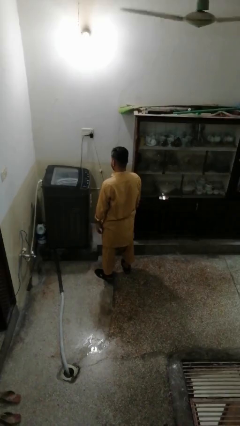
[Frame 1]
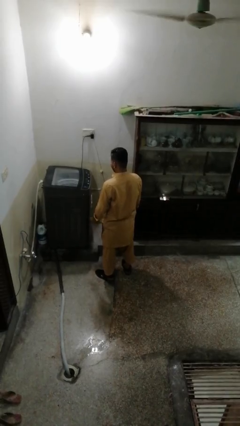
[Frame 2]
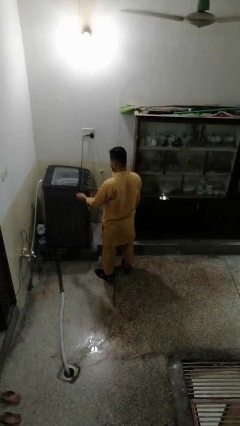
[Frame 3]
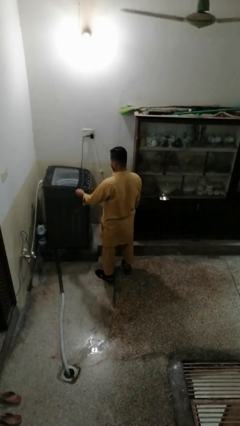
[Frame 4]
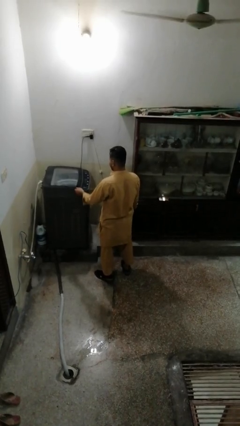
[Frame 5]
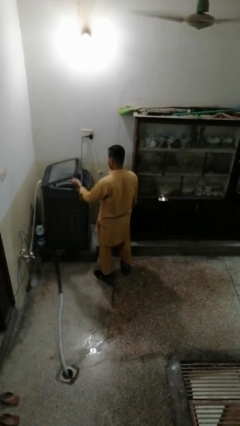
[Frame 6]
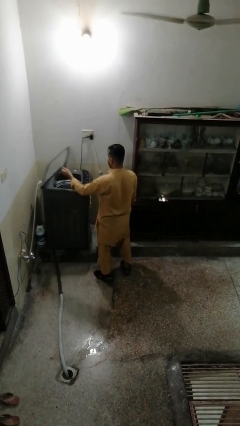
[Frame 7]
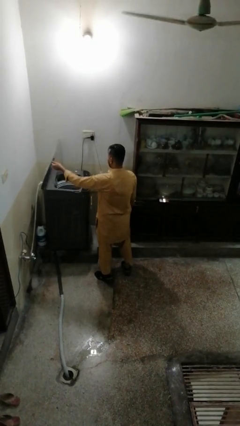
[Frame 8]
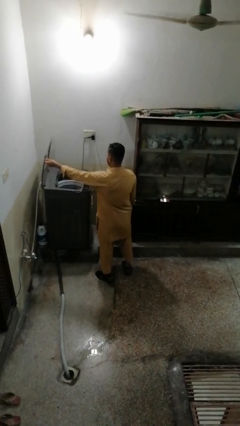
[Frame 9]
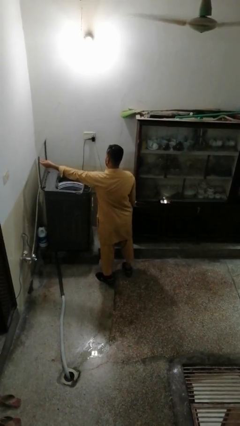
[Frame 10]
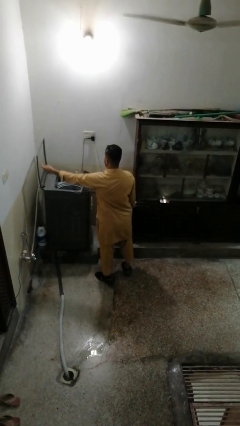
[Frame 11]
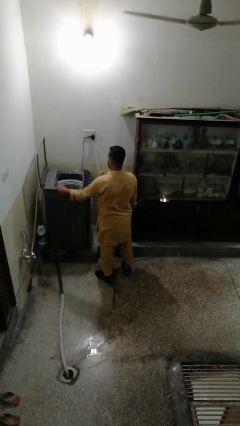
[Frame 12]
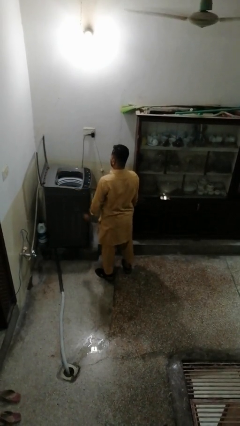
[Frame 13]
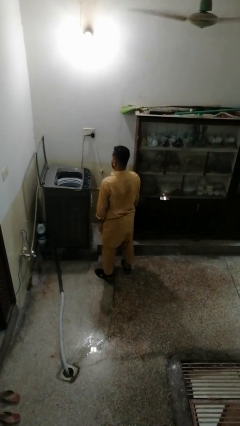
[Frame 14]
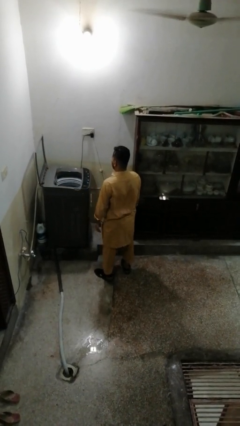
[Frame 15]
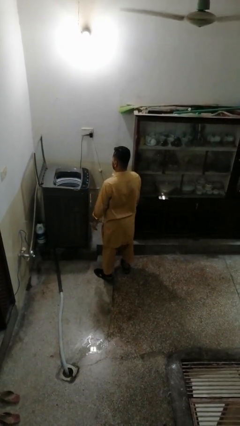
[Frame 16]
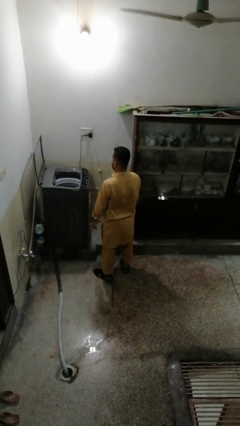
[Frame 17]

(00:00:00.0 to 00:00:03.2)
person opens clothes washer

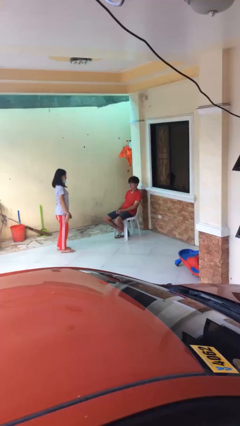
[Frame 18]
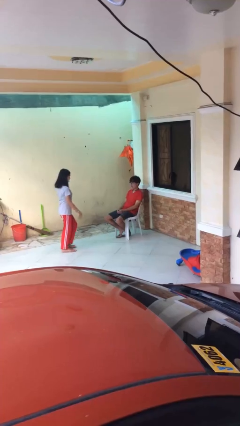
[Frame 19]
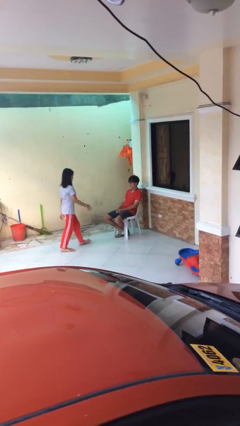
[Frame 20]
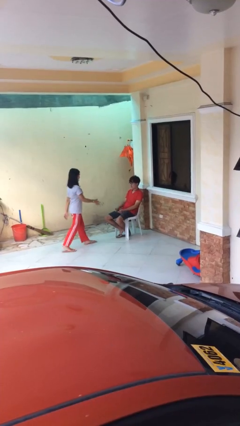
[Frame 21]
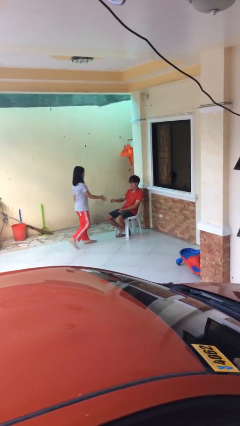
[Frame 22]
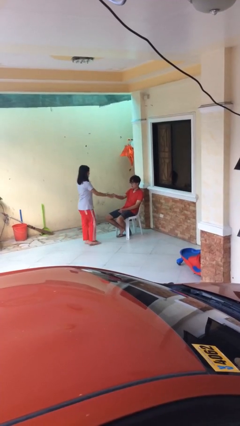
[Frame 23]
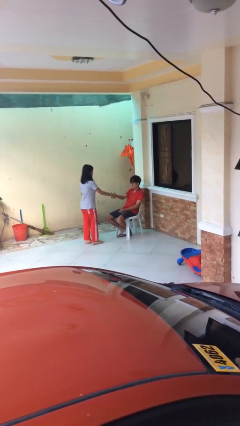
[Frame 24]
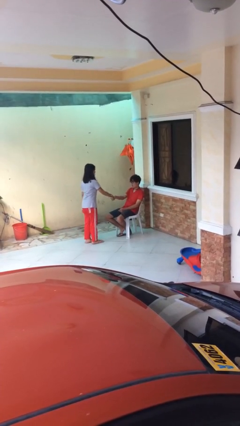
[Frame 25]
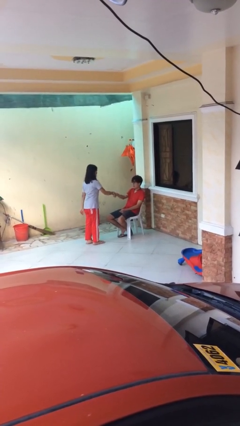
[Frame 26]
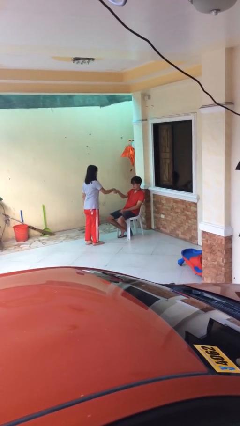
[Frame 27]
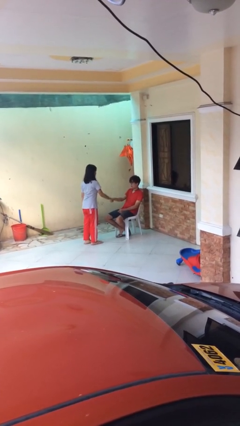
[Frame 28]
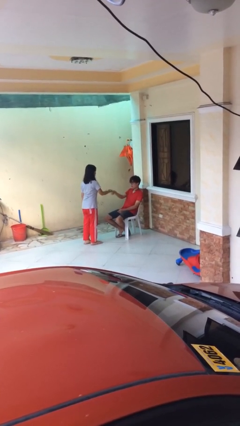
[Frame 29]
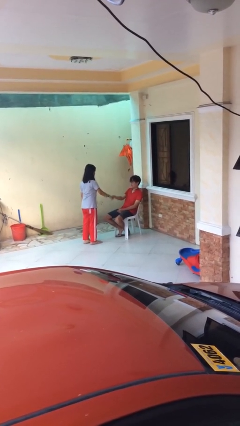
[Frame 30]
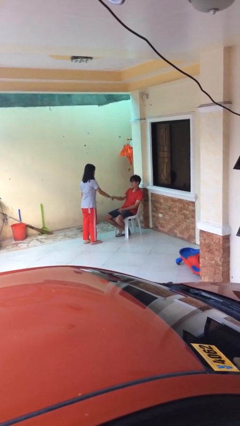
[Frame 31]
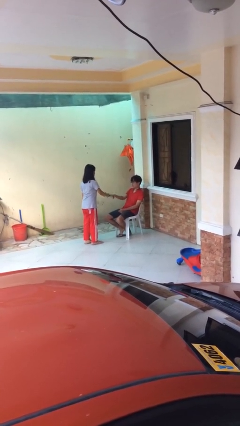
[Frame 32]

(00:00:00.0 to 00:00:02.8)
person shakes hand

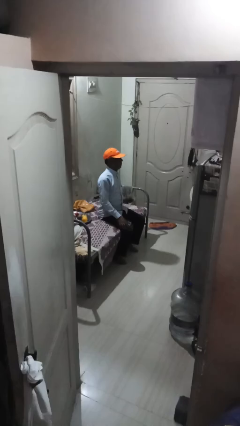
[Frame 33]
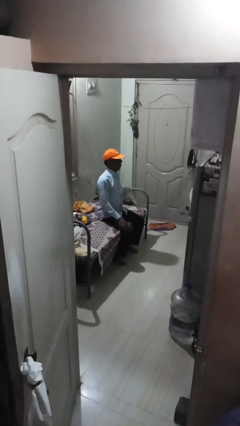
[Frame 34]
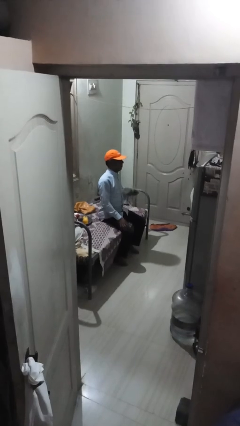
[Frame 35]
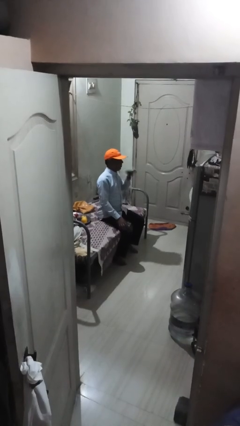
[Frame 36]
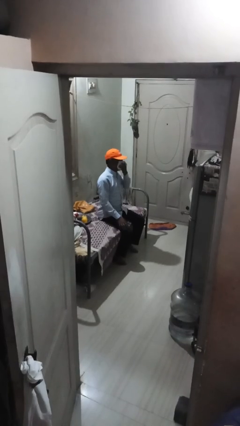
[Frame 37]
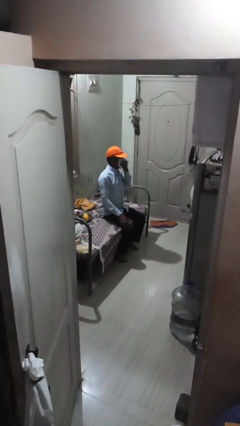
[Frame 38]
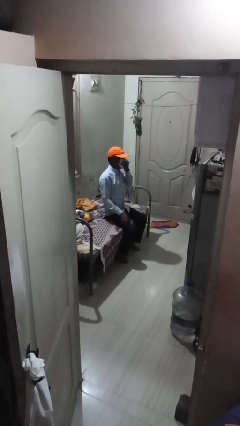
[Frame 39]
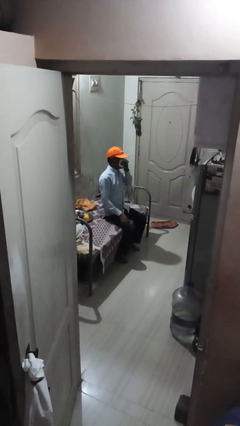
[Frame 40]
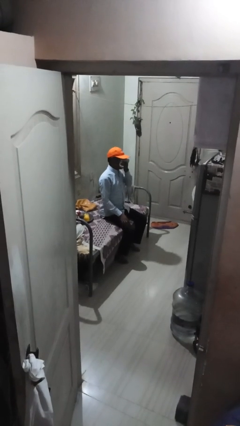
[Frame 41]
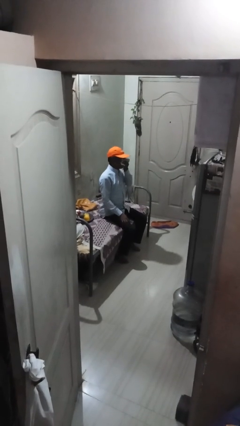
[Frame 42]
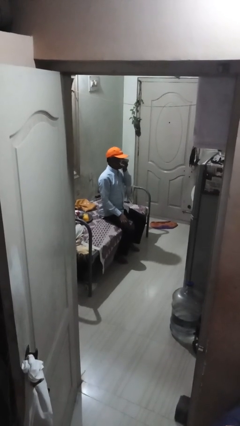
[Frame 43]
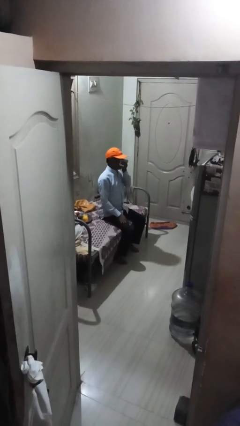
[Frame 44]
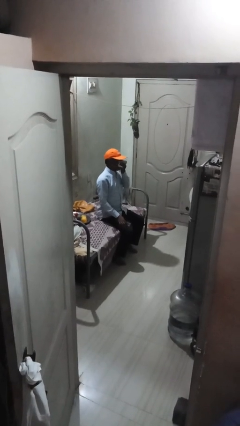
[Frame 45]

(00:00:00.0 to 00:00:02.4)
person blows nose

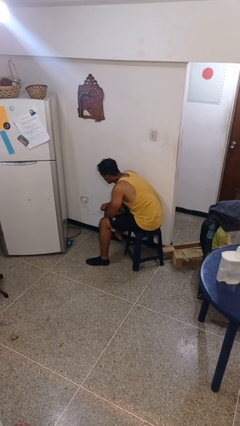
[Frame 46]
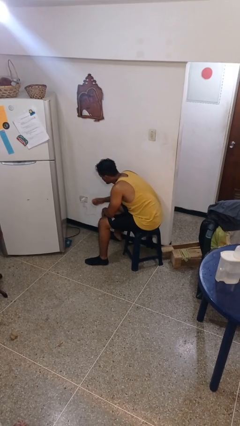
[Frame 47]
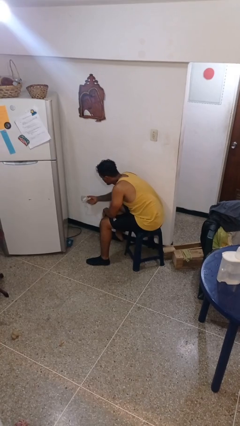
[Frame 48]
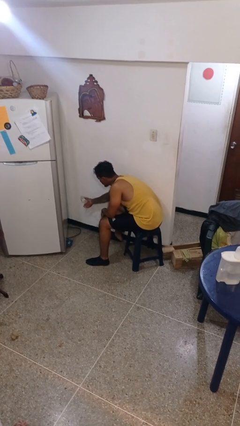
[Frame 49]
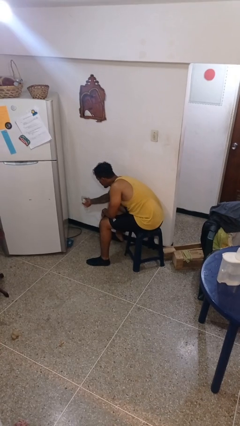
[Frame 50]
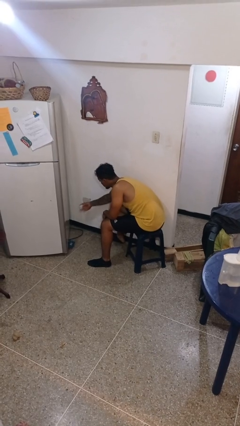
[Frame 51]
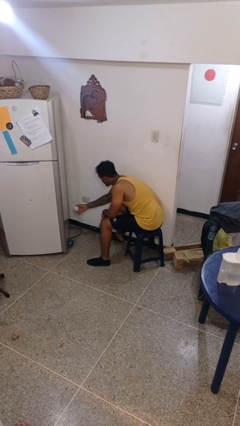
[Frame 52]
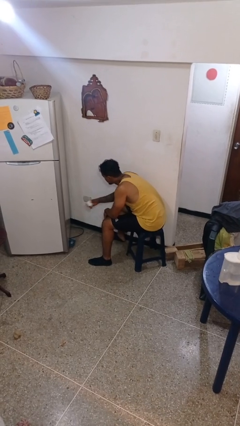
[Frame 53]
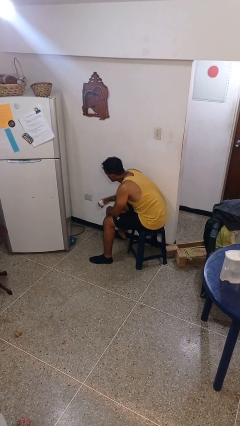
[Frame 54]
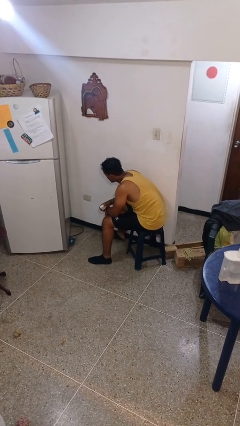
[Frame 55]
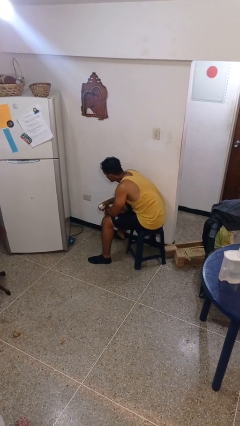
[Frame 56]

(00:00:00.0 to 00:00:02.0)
person unplugs from electrical socket

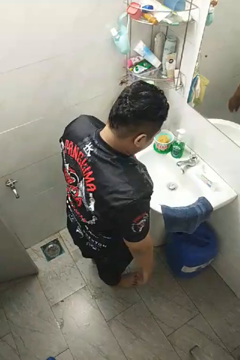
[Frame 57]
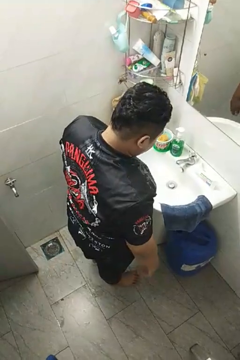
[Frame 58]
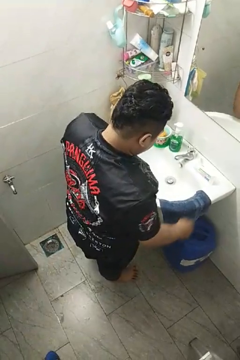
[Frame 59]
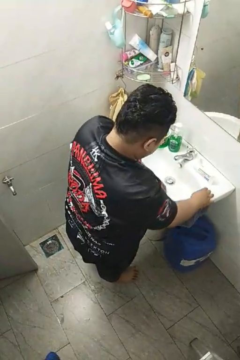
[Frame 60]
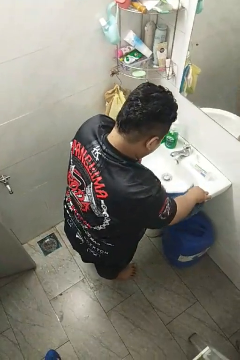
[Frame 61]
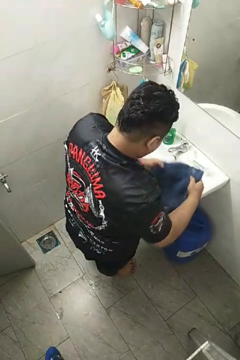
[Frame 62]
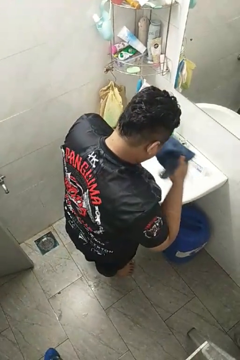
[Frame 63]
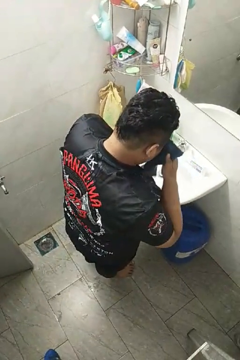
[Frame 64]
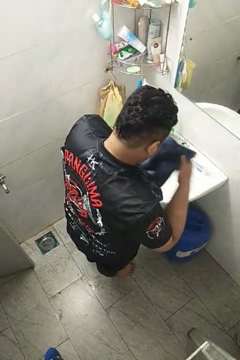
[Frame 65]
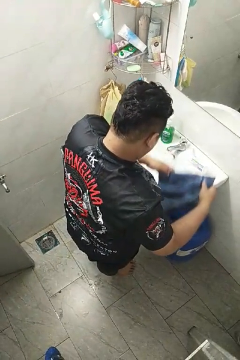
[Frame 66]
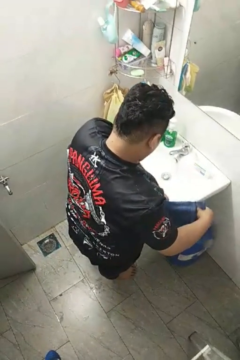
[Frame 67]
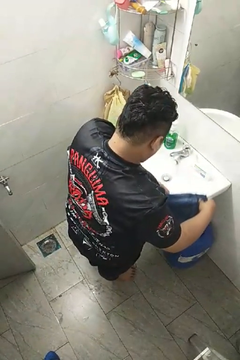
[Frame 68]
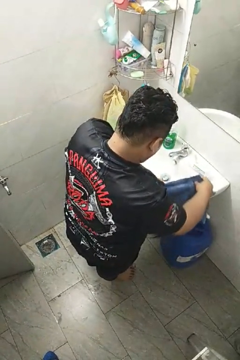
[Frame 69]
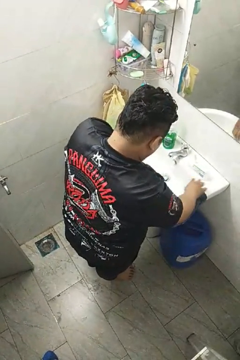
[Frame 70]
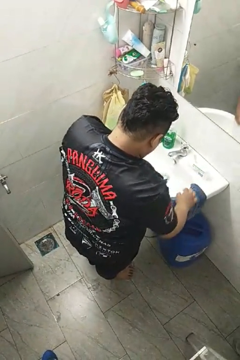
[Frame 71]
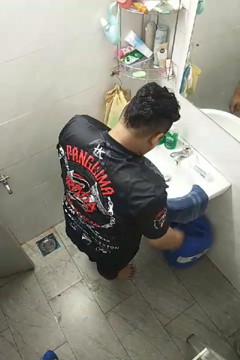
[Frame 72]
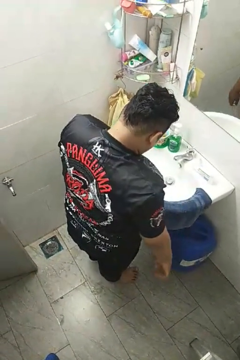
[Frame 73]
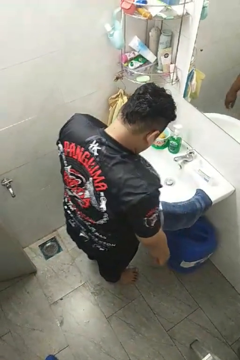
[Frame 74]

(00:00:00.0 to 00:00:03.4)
person dries face with towel

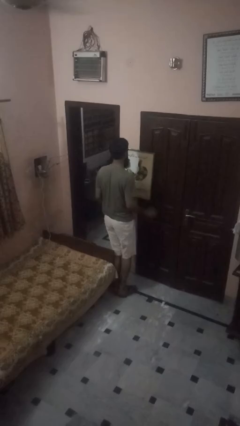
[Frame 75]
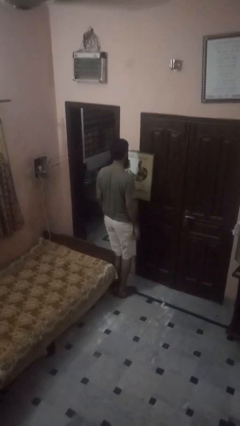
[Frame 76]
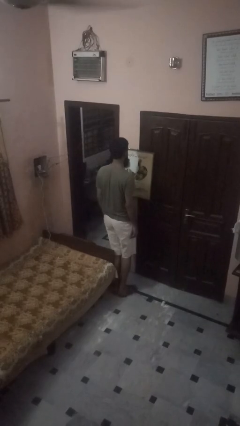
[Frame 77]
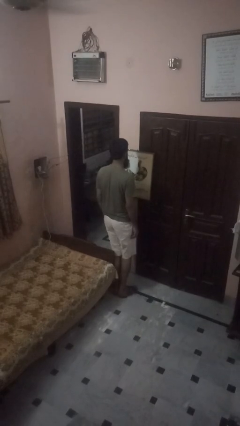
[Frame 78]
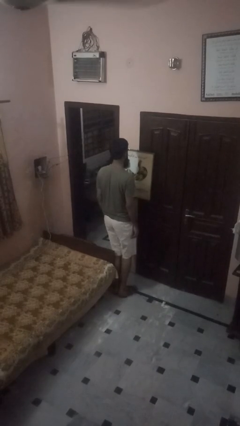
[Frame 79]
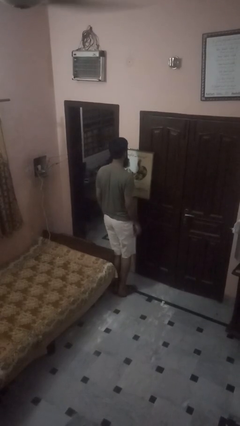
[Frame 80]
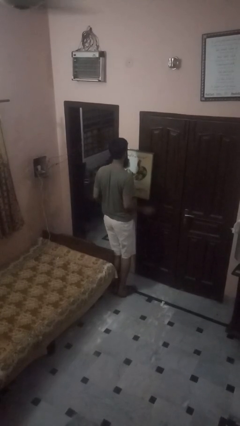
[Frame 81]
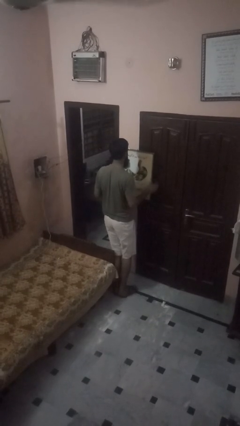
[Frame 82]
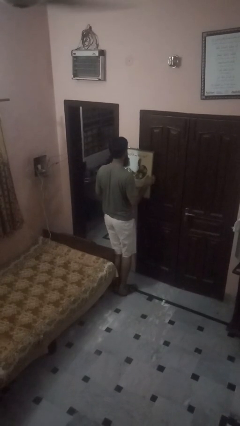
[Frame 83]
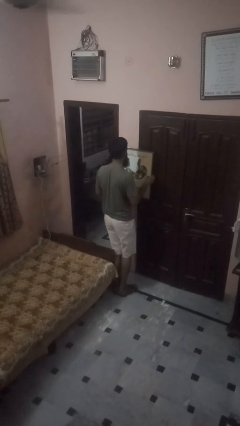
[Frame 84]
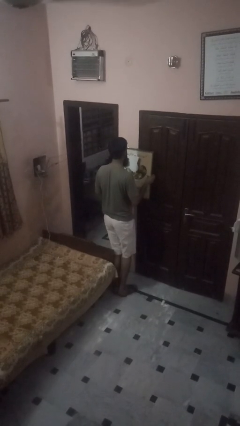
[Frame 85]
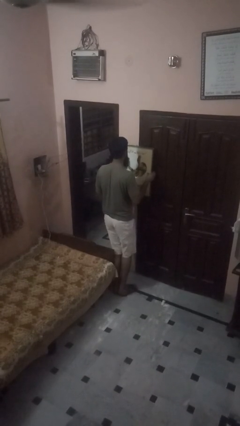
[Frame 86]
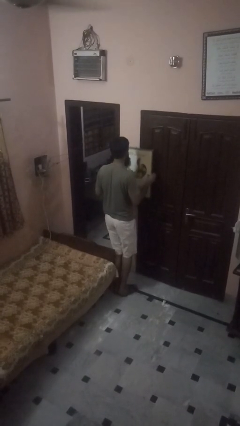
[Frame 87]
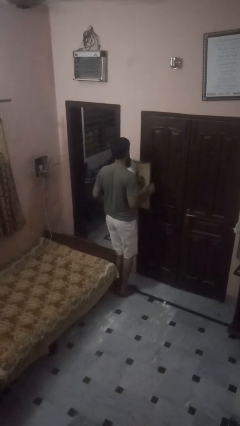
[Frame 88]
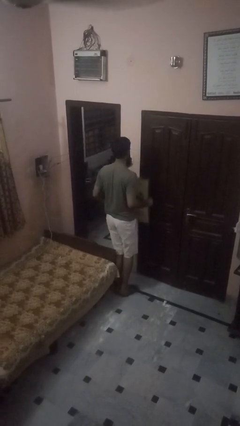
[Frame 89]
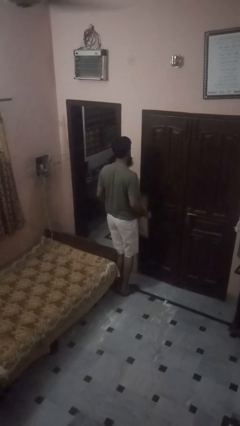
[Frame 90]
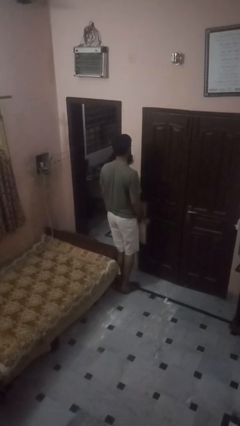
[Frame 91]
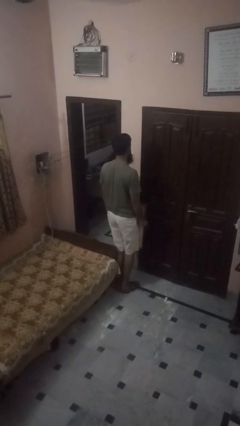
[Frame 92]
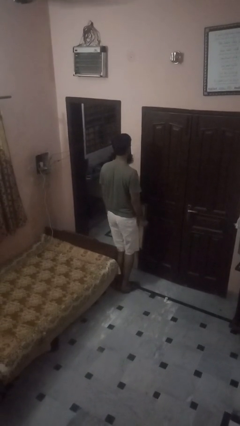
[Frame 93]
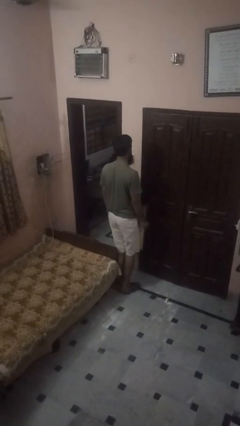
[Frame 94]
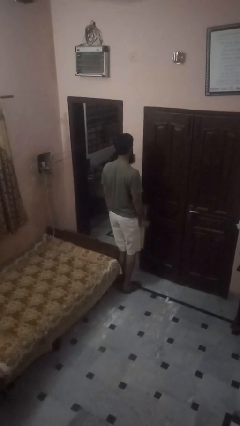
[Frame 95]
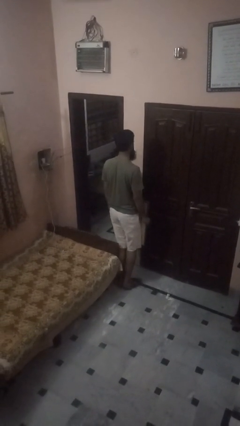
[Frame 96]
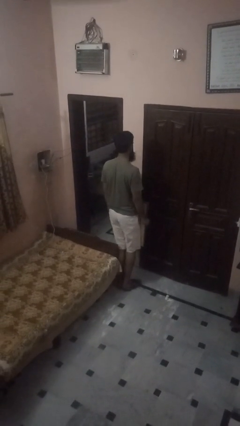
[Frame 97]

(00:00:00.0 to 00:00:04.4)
person takes down picture frame
